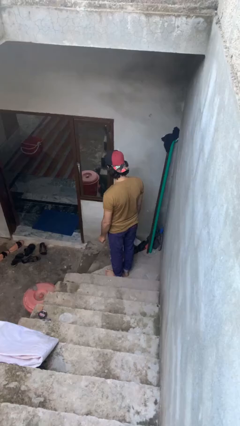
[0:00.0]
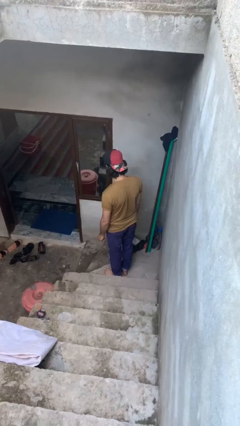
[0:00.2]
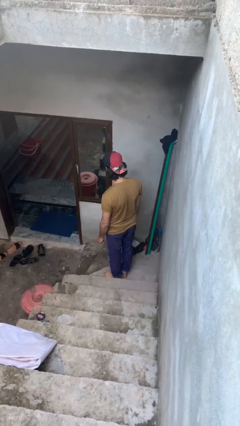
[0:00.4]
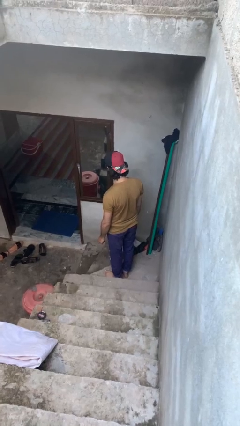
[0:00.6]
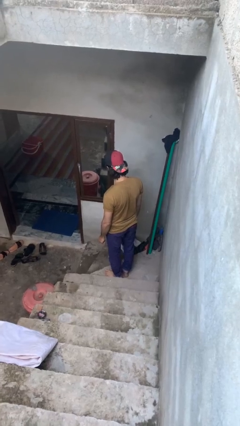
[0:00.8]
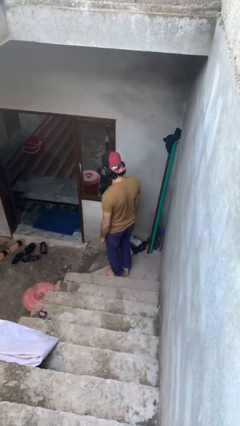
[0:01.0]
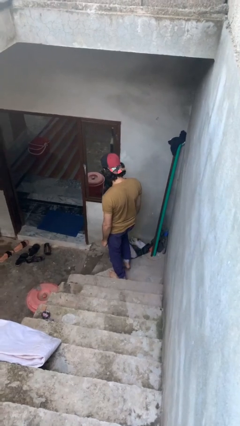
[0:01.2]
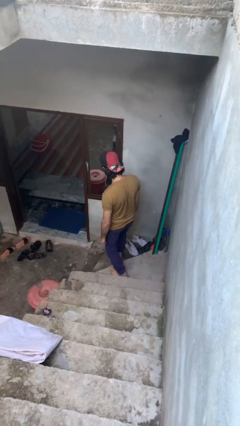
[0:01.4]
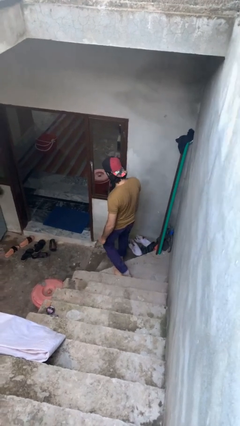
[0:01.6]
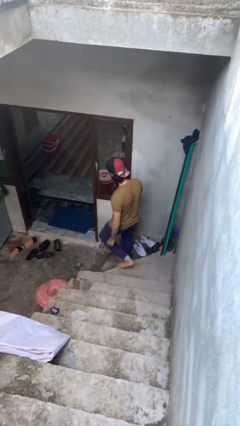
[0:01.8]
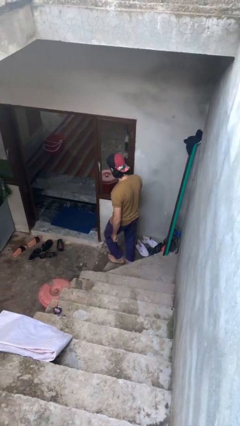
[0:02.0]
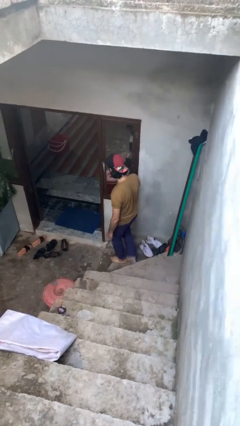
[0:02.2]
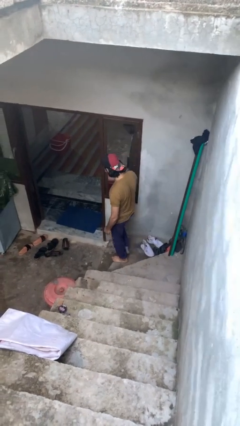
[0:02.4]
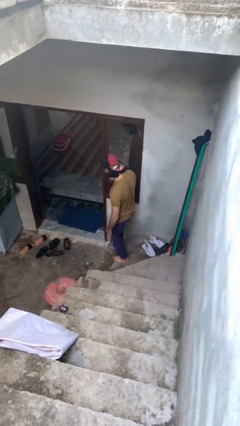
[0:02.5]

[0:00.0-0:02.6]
person climbs down stairs

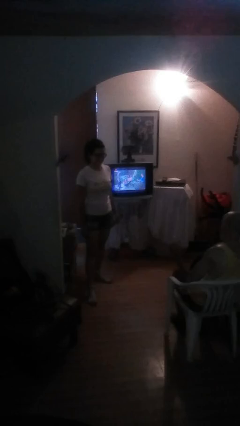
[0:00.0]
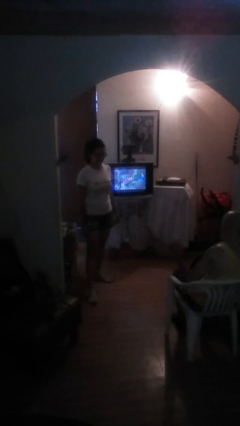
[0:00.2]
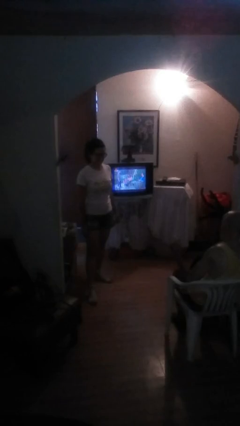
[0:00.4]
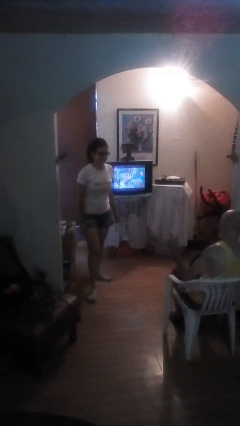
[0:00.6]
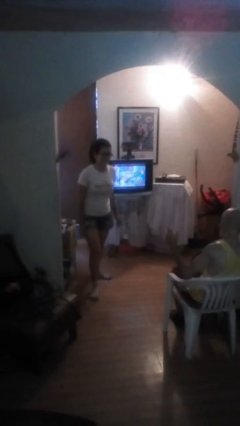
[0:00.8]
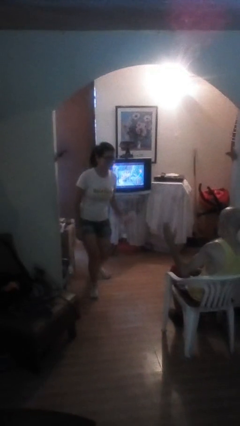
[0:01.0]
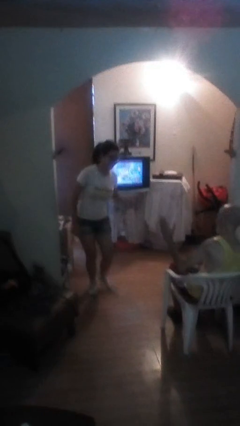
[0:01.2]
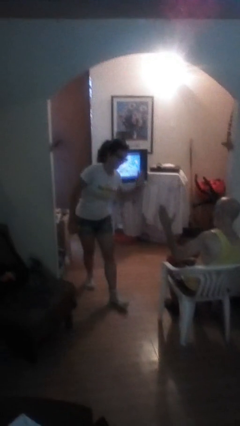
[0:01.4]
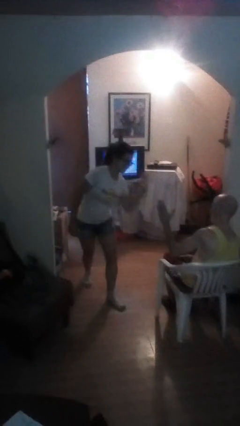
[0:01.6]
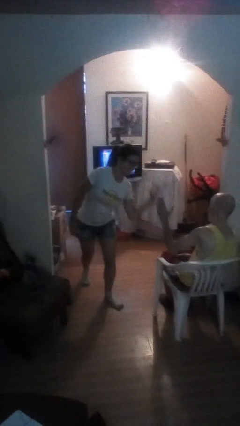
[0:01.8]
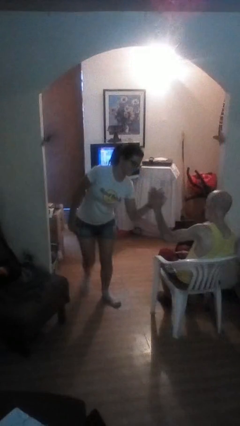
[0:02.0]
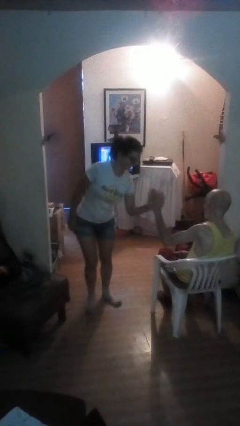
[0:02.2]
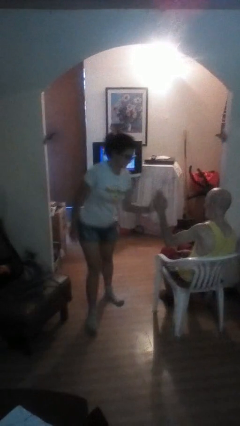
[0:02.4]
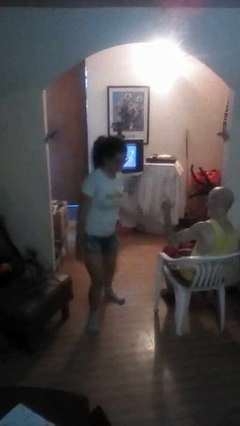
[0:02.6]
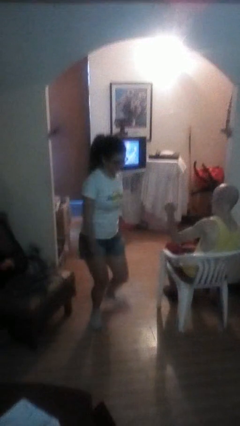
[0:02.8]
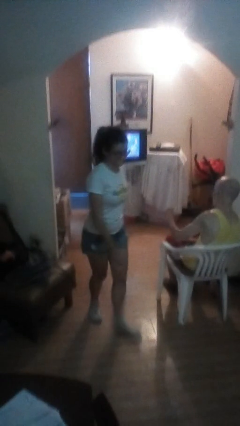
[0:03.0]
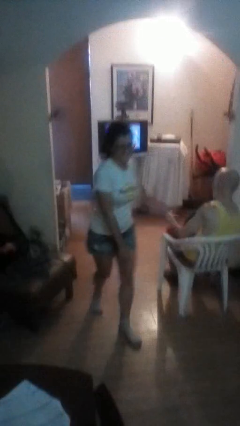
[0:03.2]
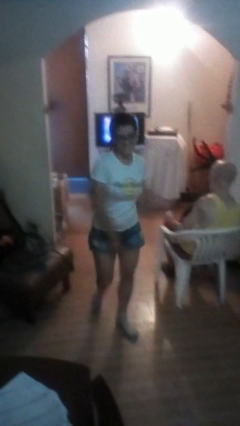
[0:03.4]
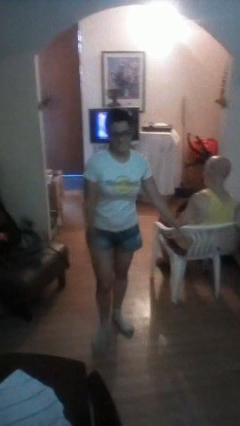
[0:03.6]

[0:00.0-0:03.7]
person highfives hand

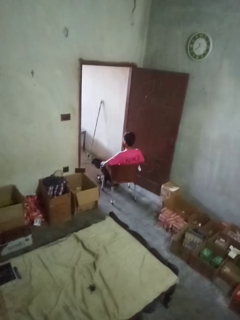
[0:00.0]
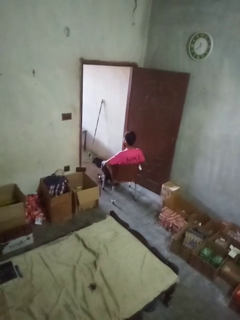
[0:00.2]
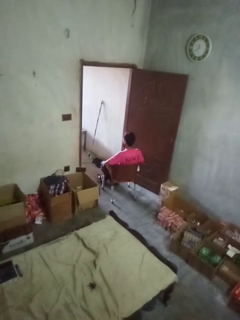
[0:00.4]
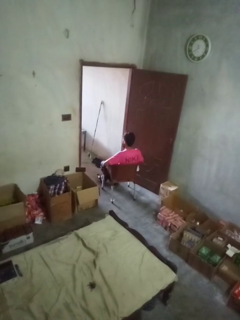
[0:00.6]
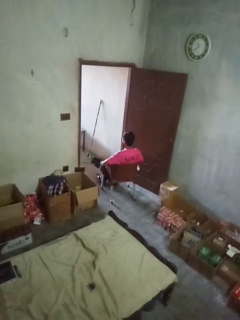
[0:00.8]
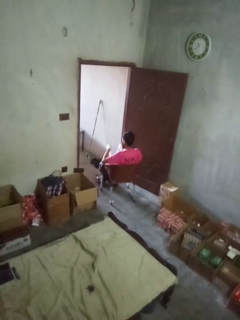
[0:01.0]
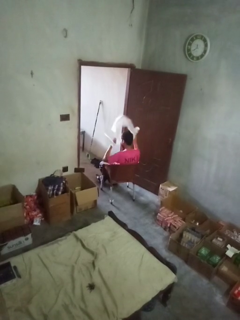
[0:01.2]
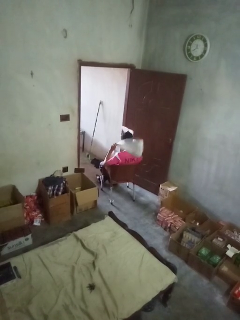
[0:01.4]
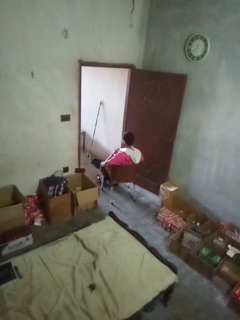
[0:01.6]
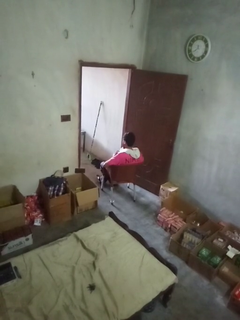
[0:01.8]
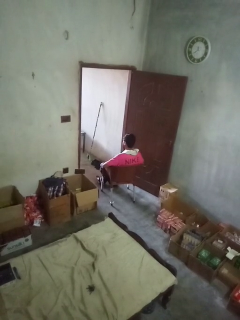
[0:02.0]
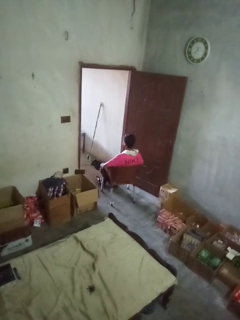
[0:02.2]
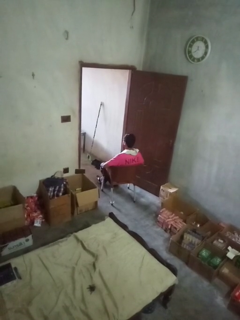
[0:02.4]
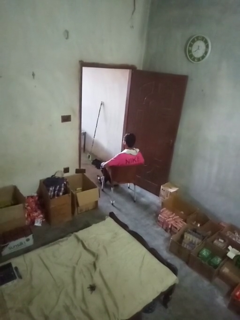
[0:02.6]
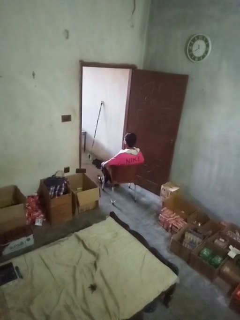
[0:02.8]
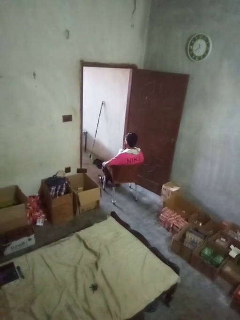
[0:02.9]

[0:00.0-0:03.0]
person puts on scarf

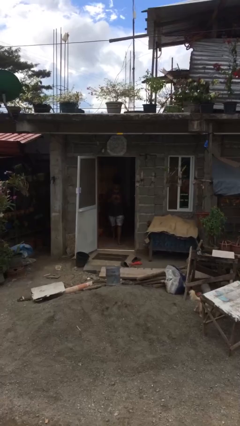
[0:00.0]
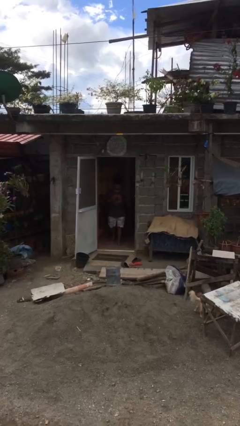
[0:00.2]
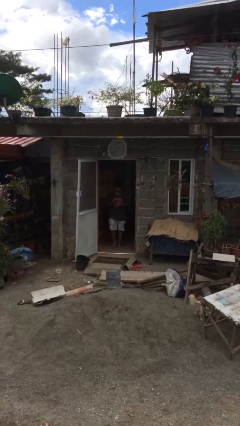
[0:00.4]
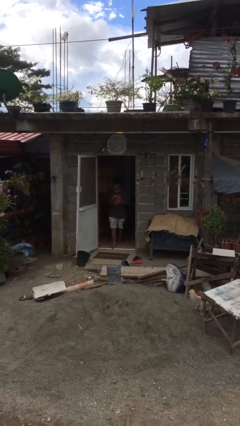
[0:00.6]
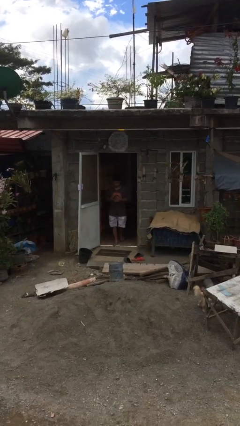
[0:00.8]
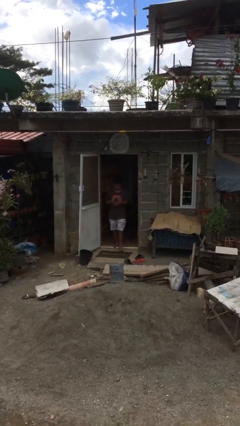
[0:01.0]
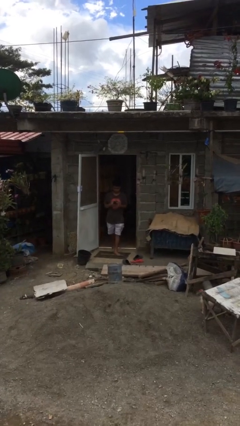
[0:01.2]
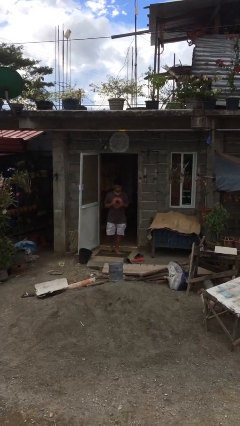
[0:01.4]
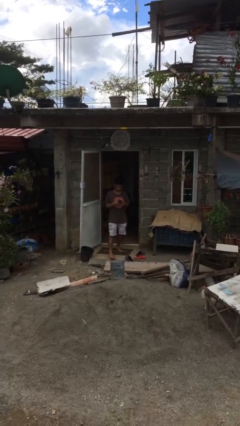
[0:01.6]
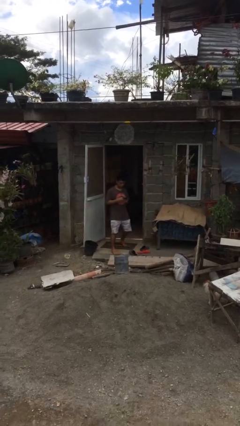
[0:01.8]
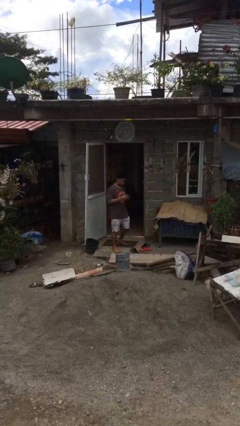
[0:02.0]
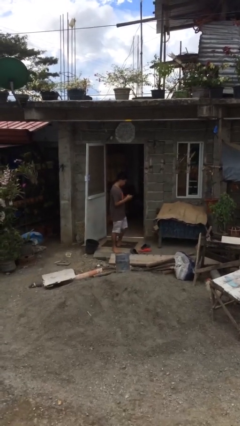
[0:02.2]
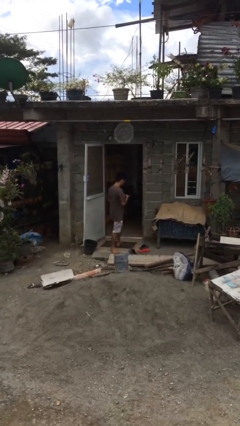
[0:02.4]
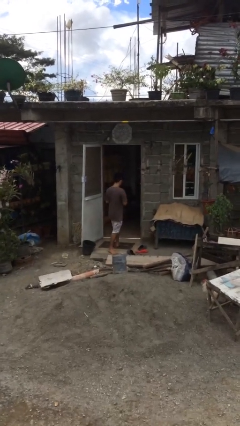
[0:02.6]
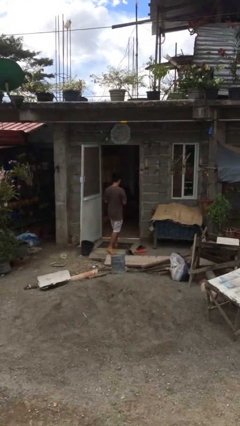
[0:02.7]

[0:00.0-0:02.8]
person enters scene through structure

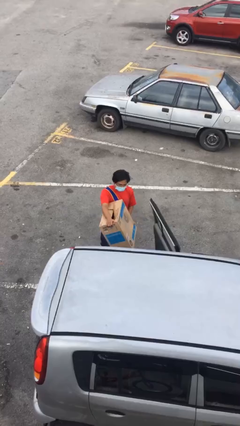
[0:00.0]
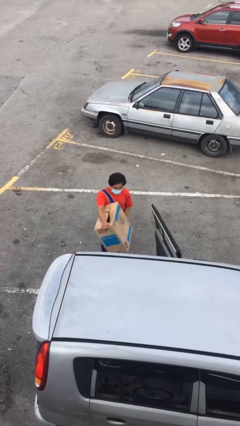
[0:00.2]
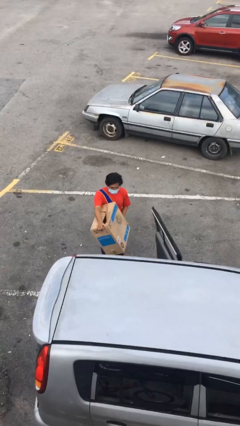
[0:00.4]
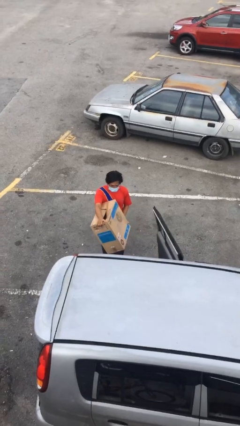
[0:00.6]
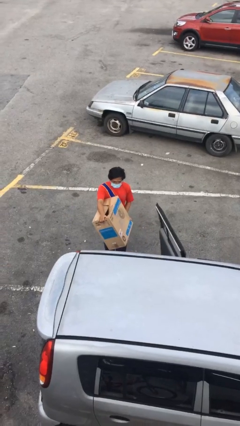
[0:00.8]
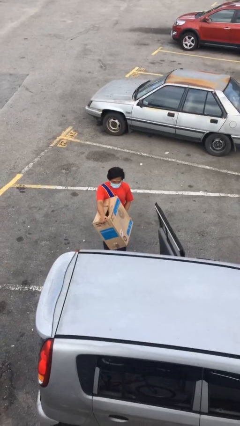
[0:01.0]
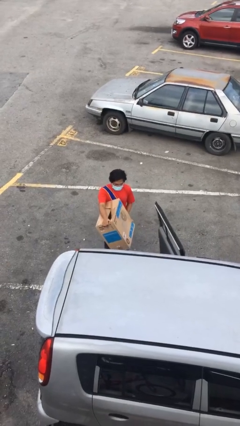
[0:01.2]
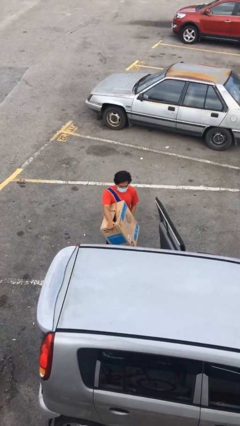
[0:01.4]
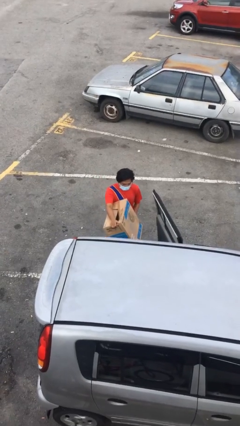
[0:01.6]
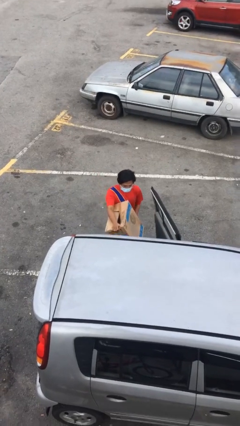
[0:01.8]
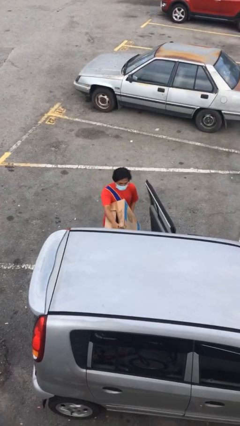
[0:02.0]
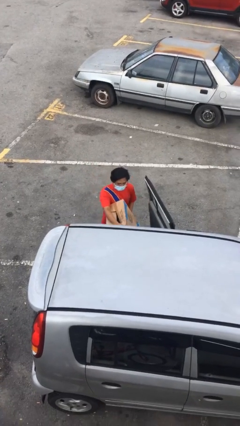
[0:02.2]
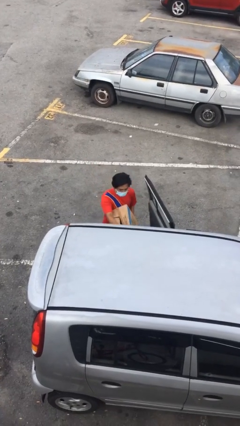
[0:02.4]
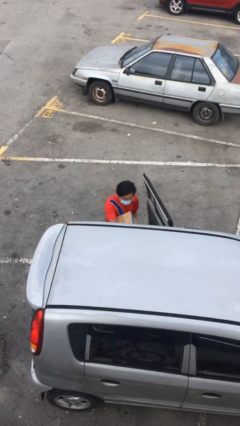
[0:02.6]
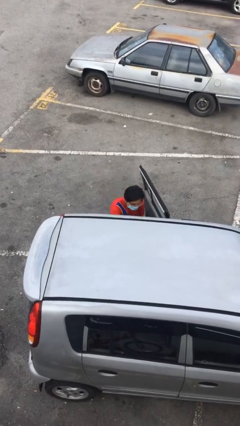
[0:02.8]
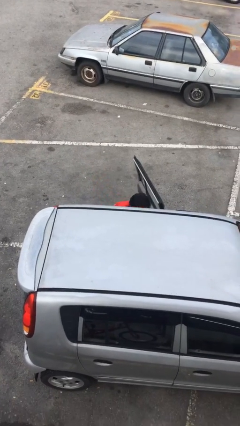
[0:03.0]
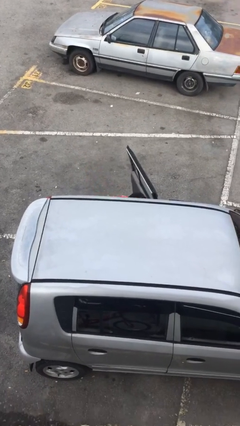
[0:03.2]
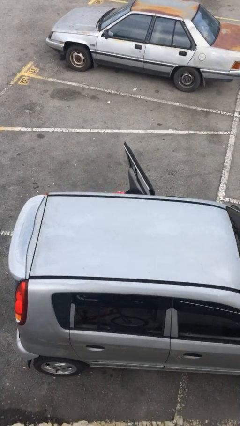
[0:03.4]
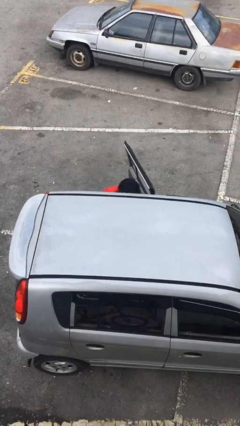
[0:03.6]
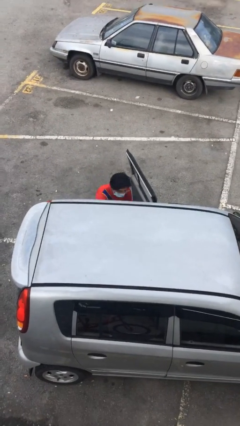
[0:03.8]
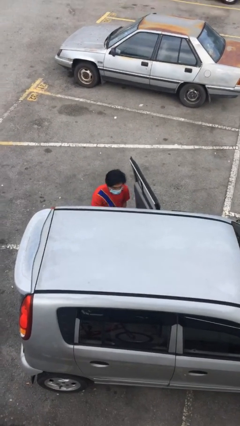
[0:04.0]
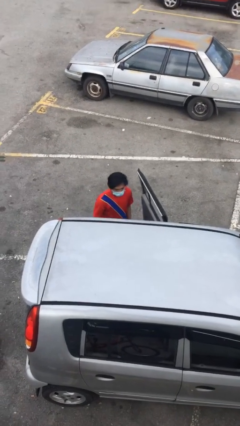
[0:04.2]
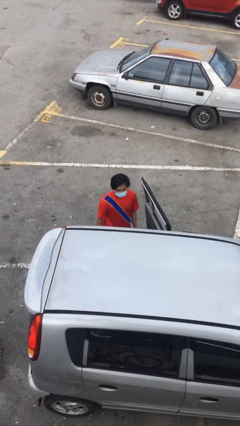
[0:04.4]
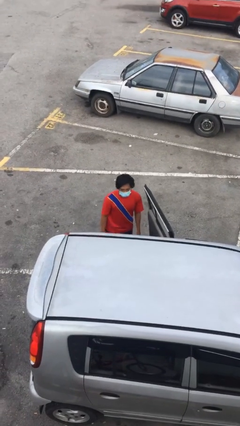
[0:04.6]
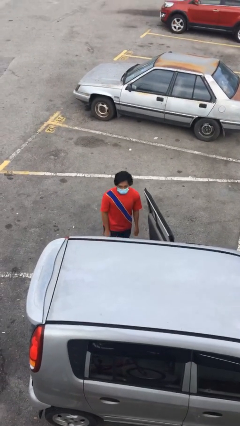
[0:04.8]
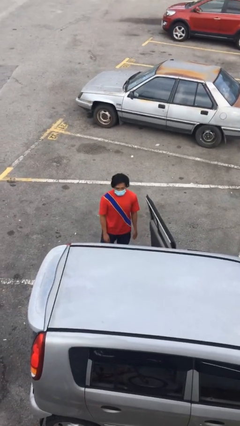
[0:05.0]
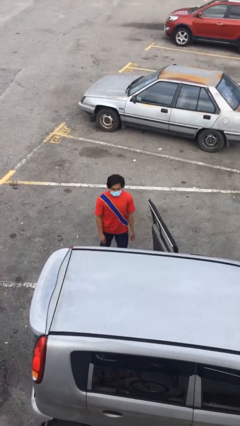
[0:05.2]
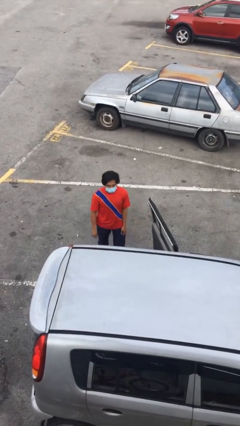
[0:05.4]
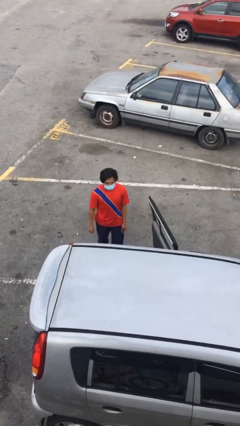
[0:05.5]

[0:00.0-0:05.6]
person loads car

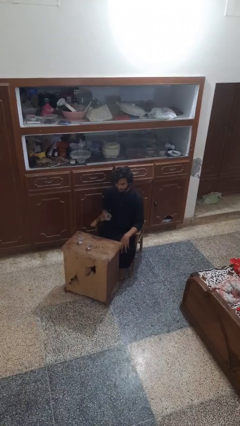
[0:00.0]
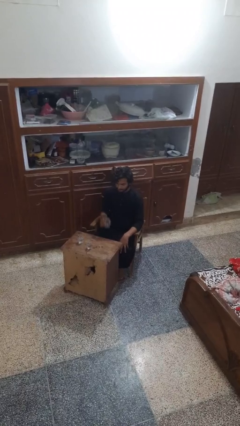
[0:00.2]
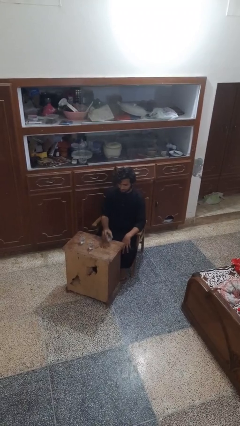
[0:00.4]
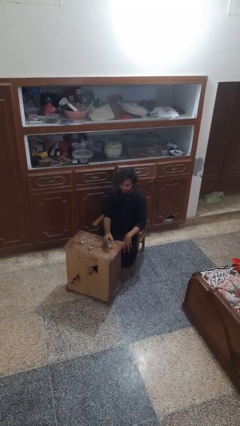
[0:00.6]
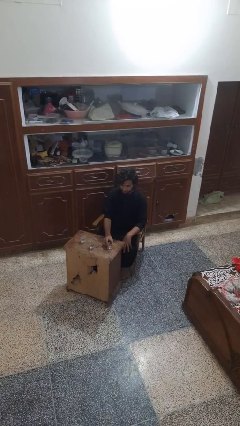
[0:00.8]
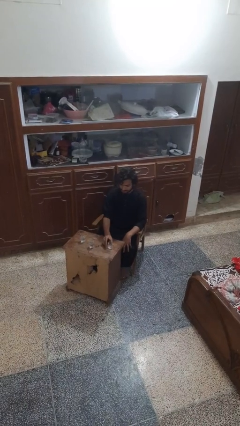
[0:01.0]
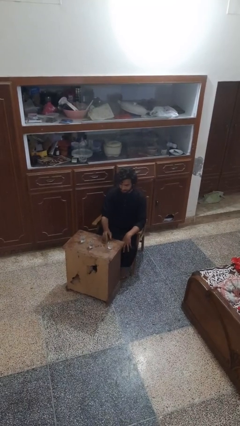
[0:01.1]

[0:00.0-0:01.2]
person puts down object on table
